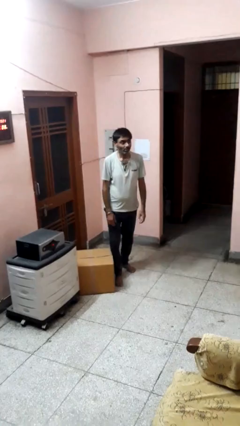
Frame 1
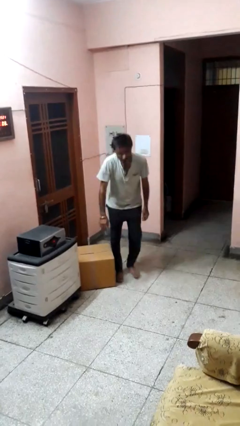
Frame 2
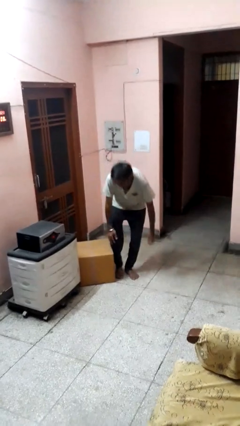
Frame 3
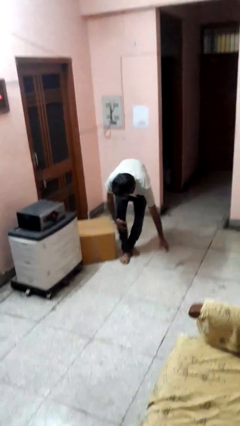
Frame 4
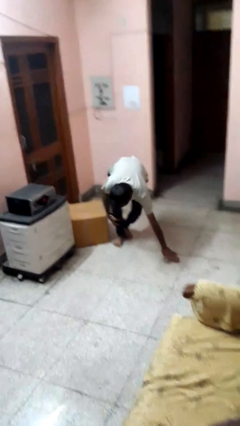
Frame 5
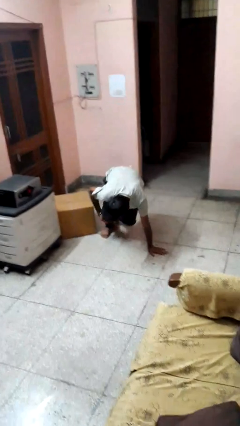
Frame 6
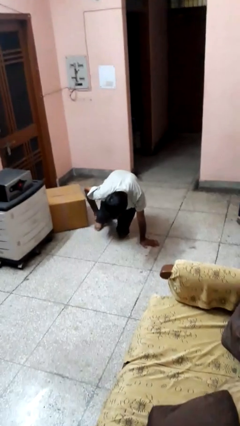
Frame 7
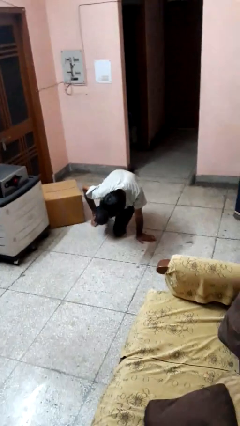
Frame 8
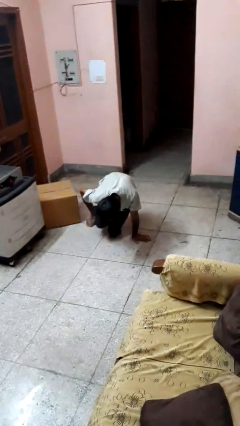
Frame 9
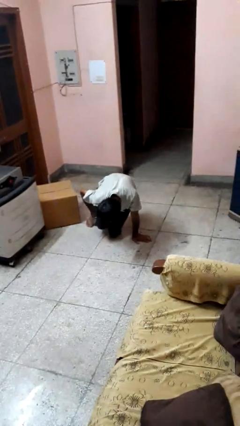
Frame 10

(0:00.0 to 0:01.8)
person trips on object on floor

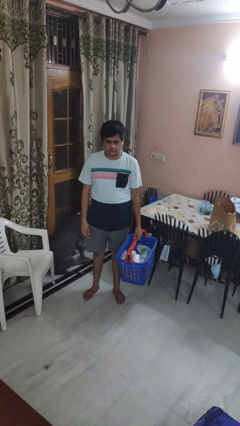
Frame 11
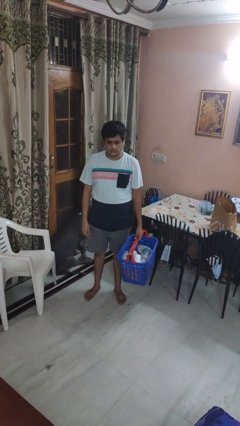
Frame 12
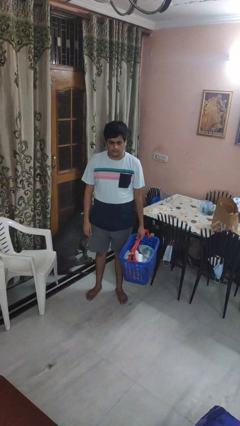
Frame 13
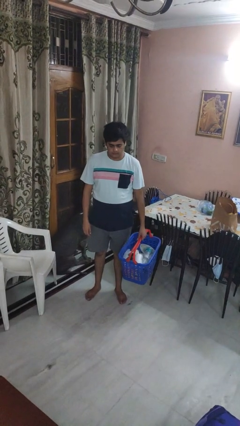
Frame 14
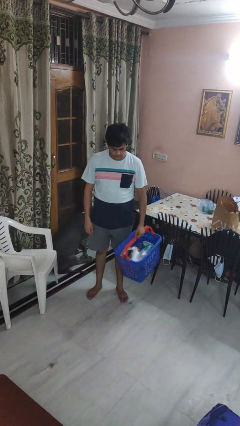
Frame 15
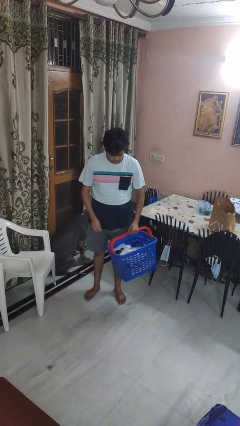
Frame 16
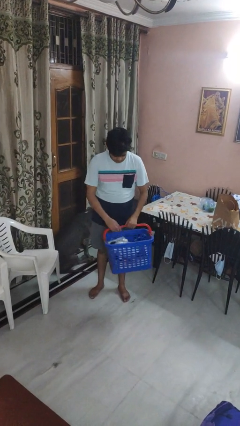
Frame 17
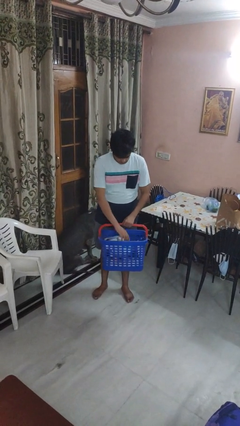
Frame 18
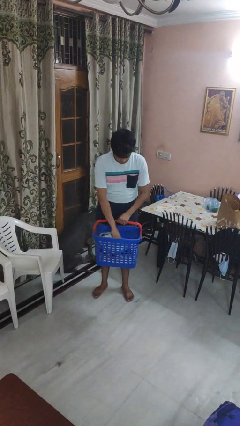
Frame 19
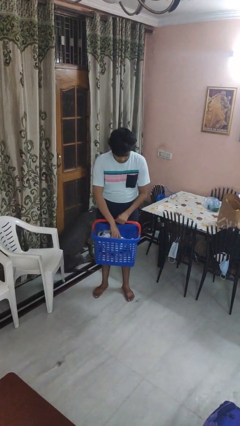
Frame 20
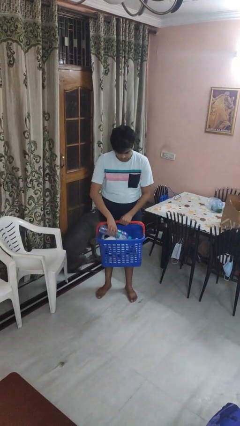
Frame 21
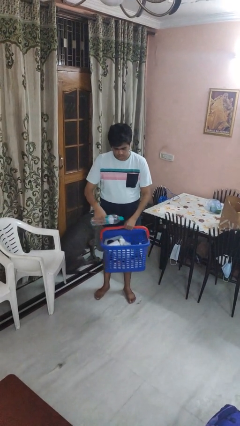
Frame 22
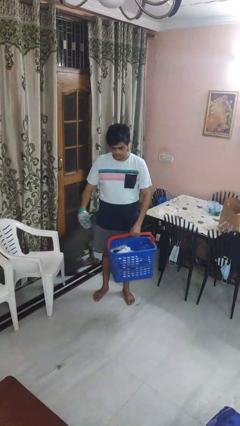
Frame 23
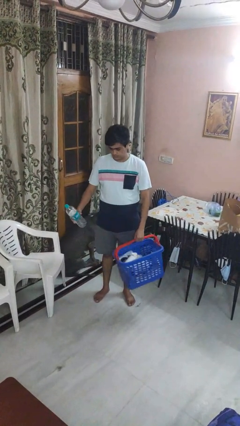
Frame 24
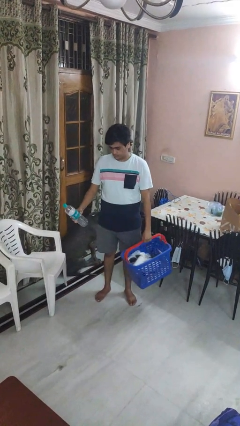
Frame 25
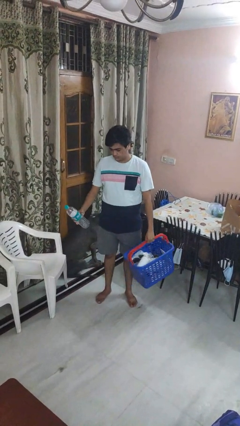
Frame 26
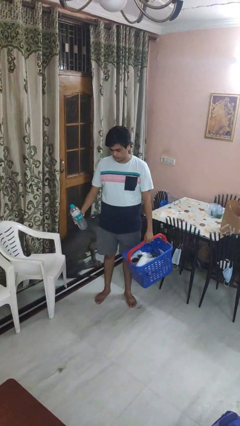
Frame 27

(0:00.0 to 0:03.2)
person takes object from basket

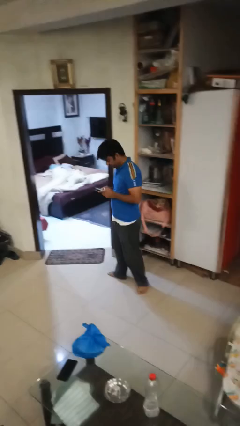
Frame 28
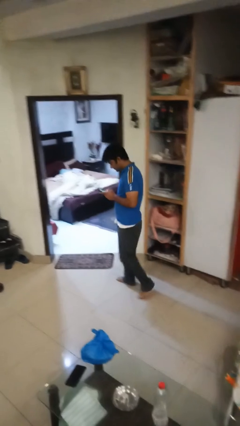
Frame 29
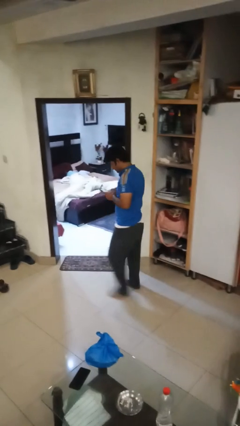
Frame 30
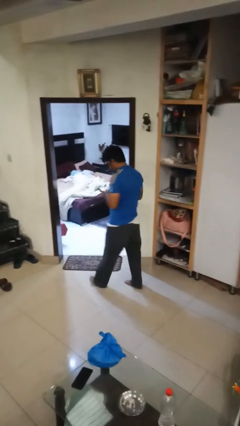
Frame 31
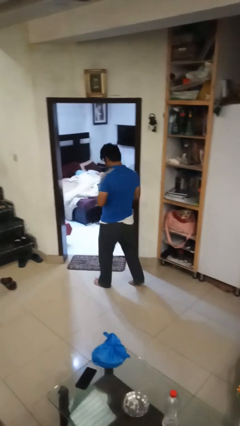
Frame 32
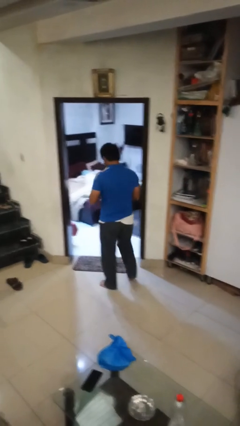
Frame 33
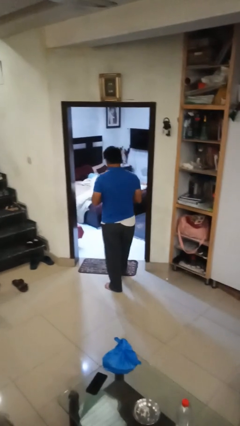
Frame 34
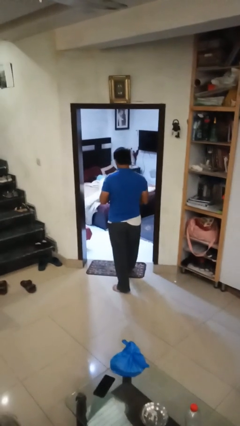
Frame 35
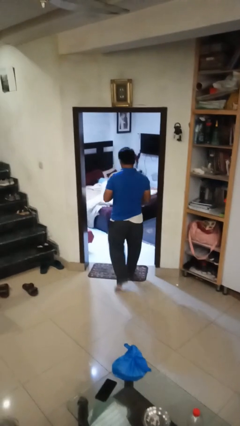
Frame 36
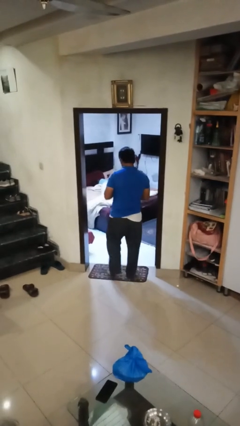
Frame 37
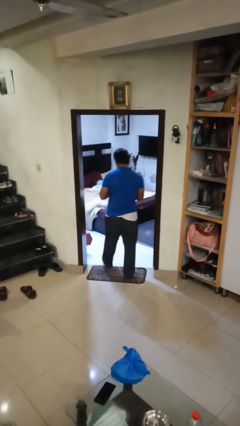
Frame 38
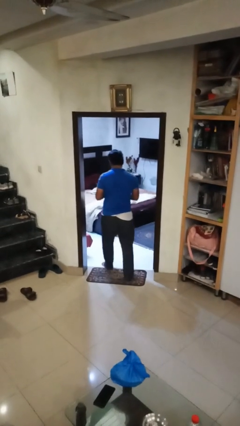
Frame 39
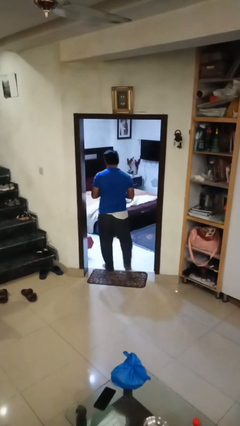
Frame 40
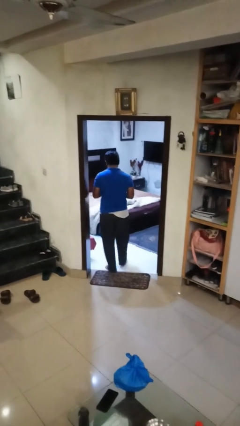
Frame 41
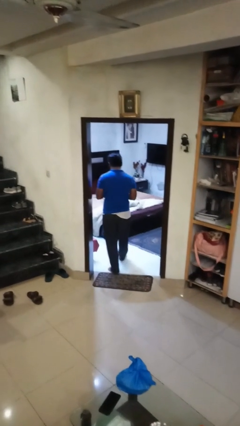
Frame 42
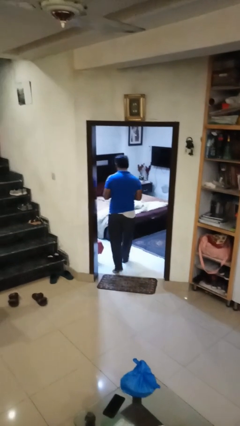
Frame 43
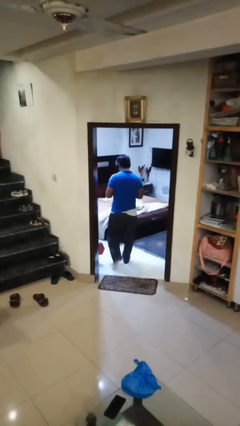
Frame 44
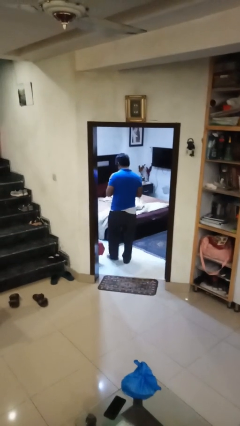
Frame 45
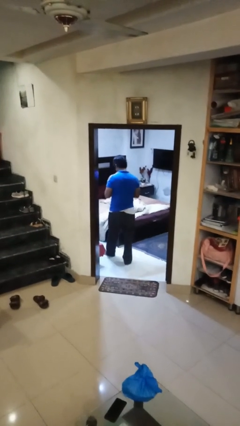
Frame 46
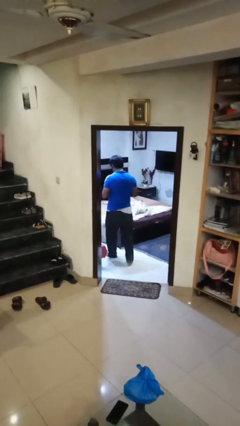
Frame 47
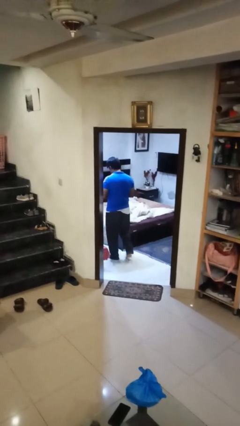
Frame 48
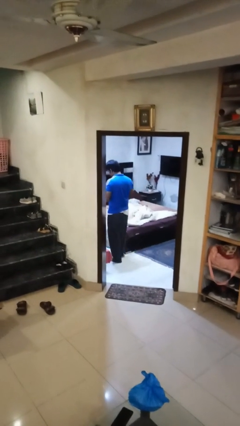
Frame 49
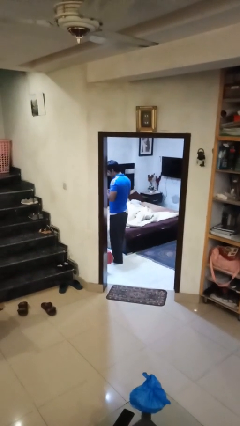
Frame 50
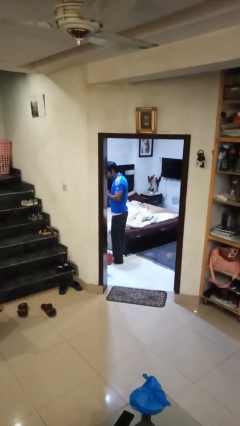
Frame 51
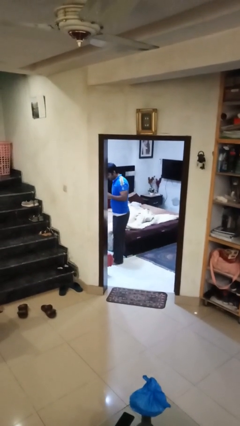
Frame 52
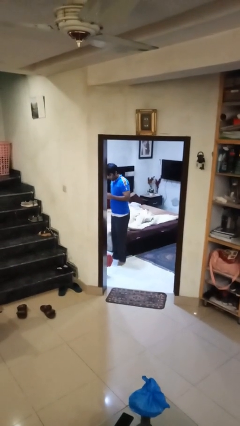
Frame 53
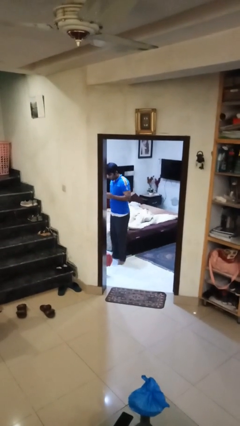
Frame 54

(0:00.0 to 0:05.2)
person exits scene through structure

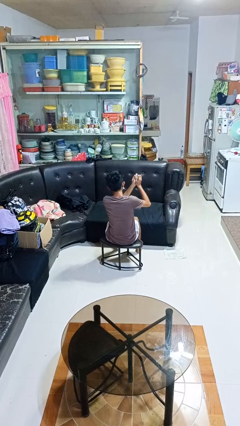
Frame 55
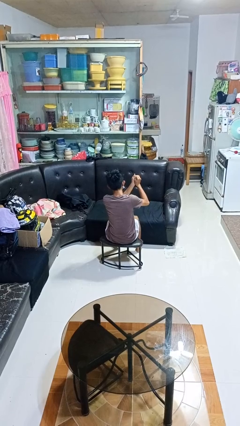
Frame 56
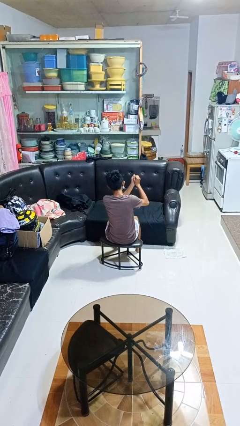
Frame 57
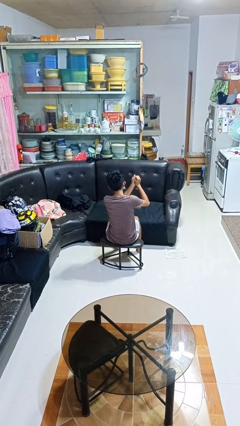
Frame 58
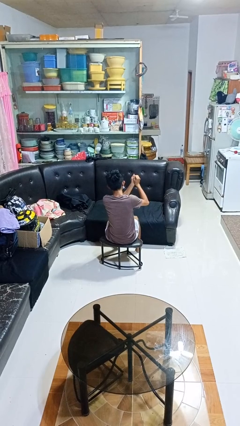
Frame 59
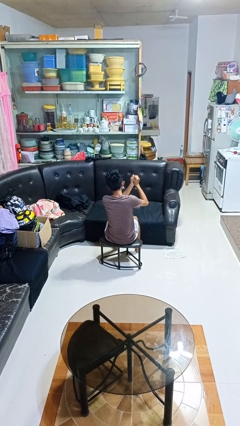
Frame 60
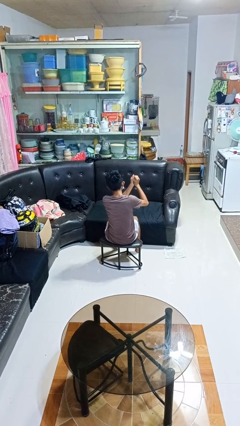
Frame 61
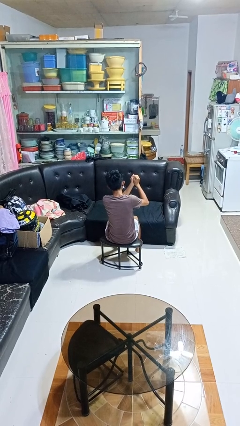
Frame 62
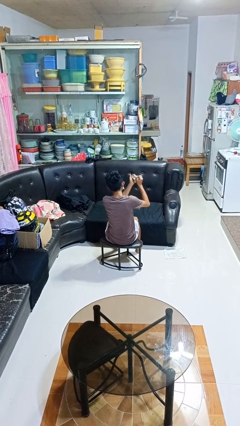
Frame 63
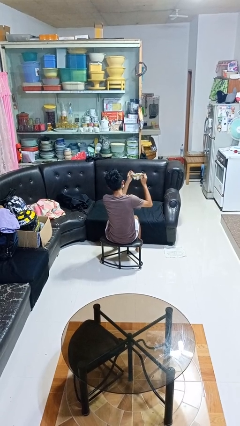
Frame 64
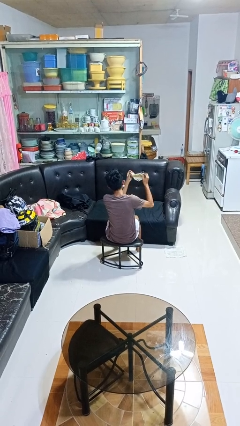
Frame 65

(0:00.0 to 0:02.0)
person crumples paper

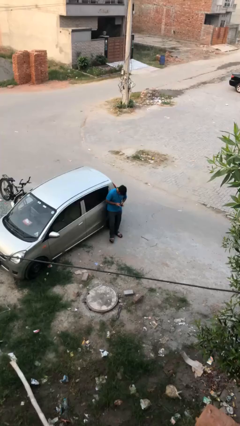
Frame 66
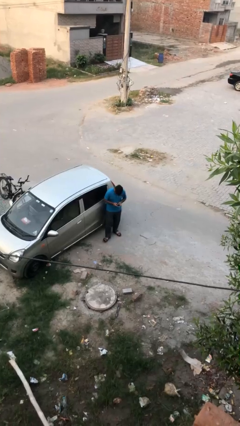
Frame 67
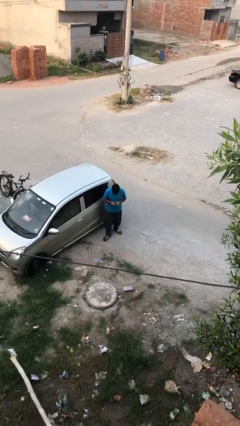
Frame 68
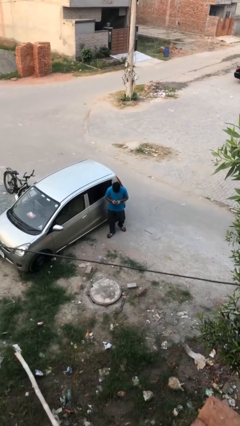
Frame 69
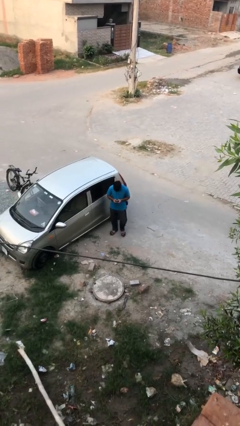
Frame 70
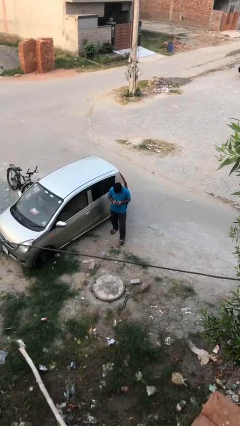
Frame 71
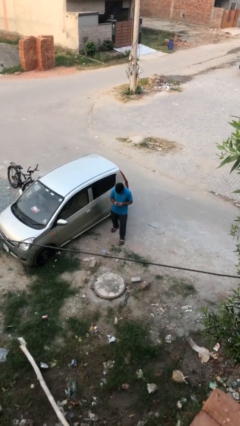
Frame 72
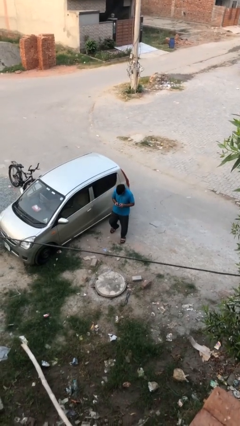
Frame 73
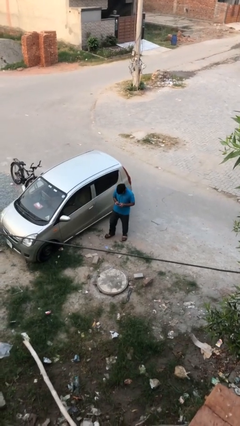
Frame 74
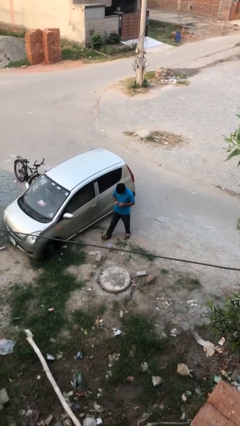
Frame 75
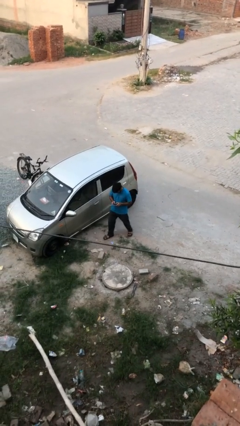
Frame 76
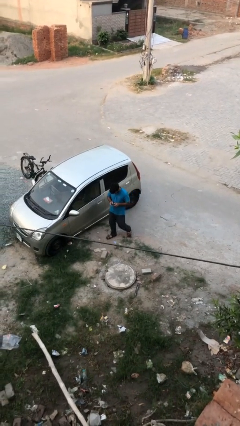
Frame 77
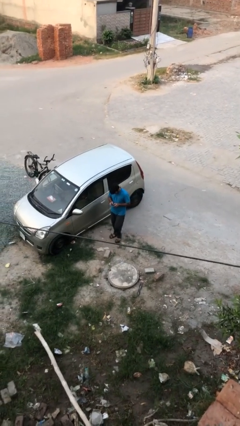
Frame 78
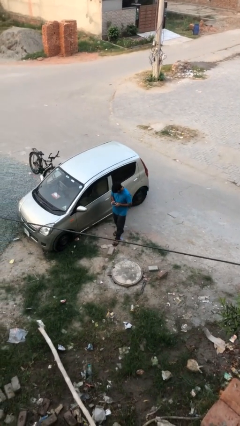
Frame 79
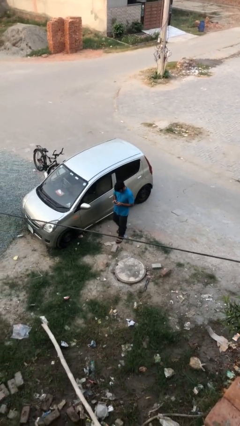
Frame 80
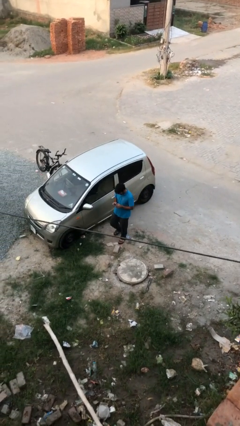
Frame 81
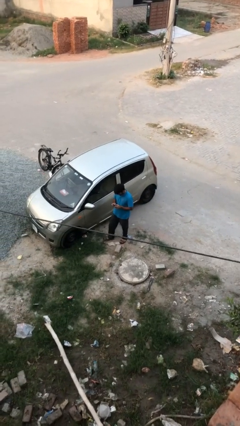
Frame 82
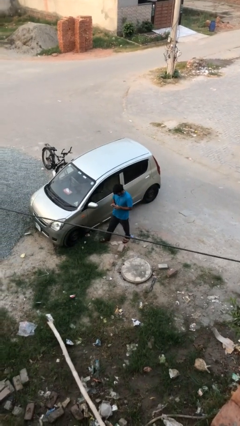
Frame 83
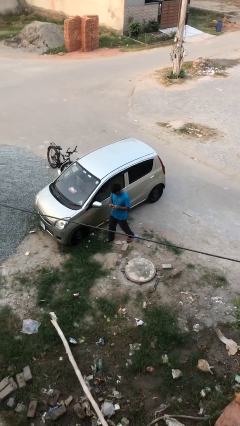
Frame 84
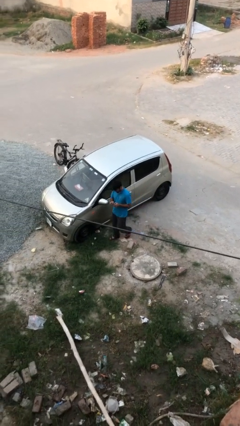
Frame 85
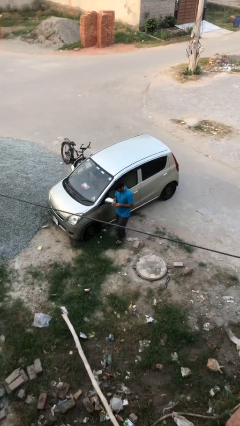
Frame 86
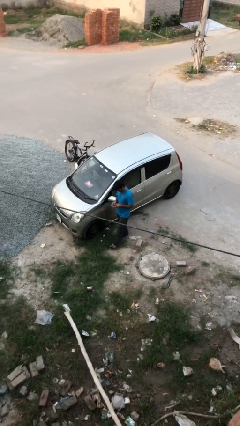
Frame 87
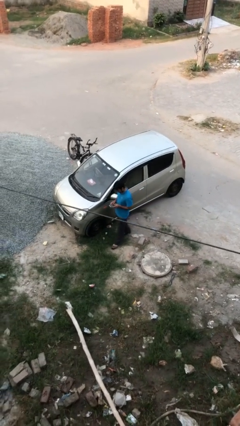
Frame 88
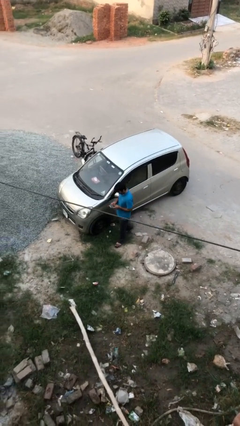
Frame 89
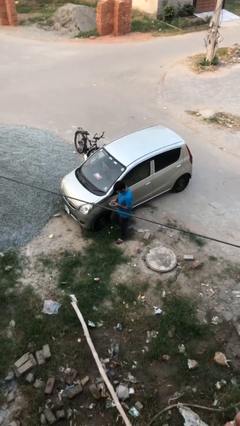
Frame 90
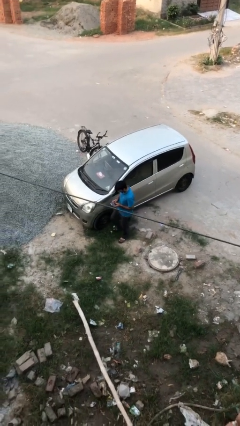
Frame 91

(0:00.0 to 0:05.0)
person texts on phone

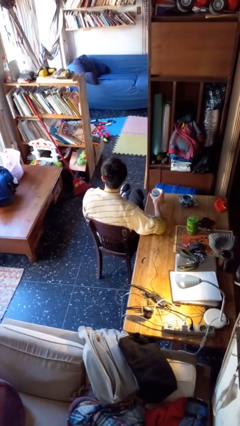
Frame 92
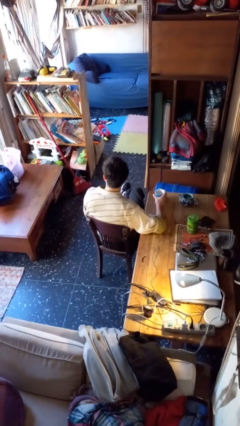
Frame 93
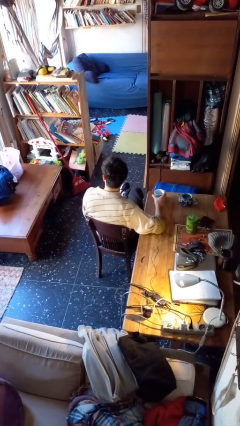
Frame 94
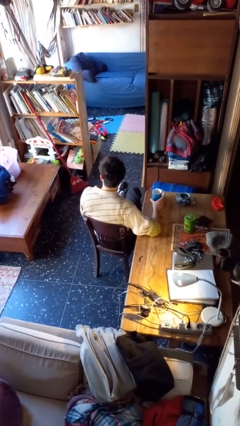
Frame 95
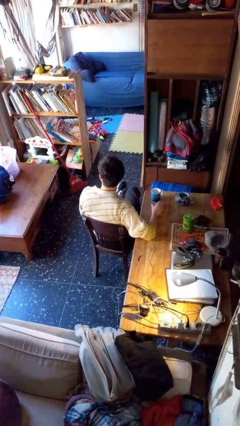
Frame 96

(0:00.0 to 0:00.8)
person puts down object on table
